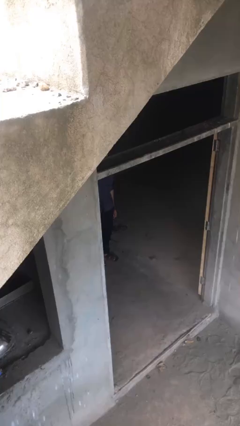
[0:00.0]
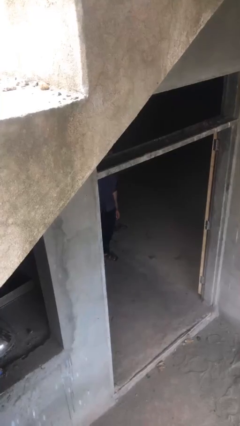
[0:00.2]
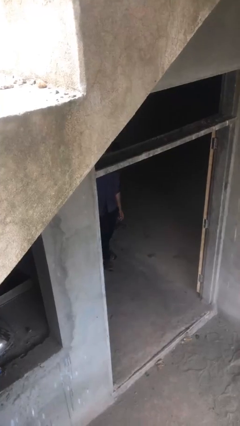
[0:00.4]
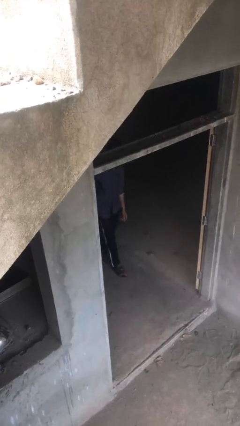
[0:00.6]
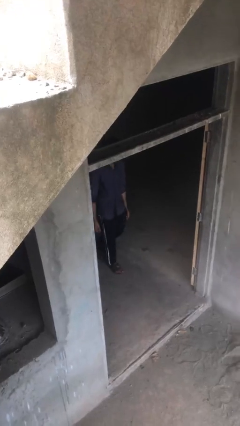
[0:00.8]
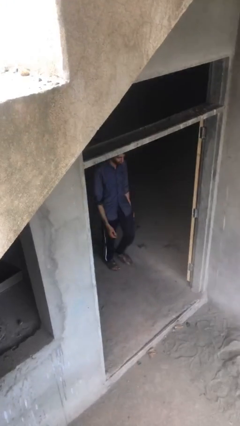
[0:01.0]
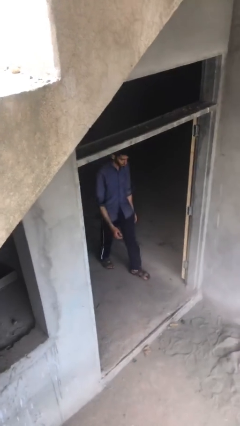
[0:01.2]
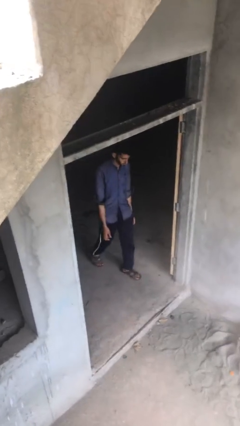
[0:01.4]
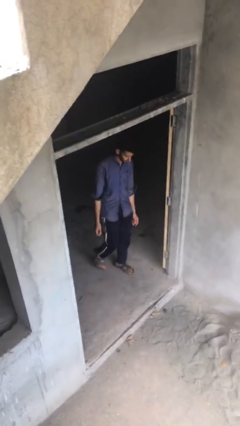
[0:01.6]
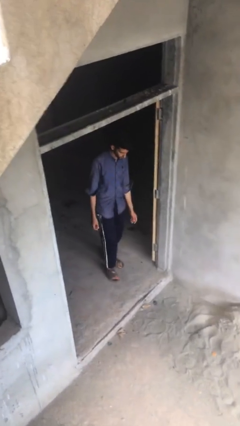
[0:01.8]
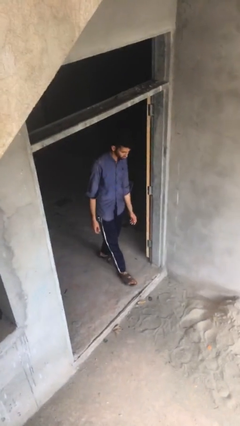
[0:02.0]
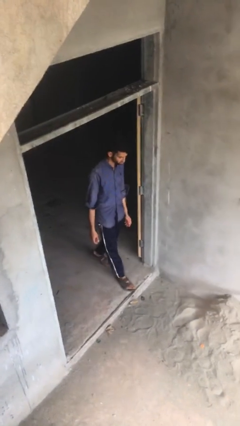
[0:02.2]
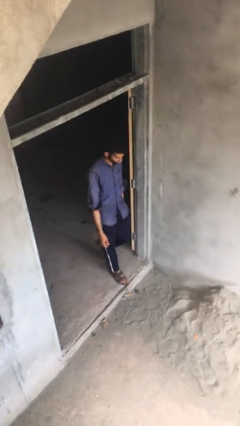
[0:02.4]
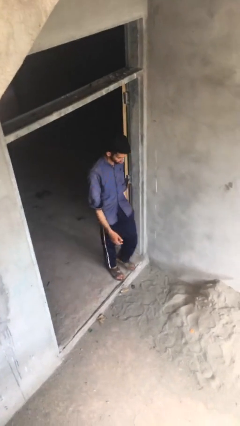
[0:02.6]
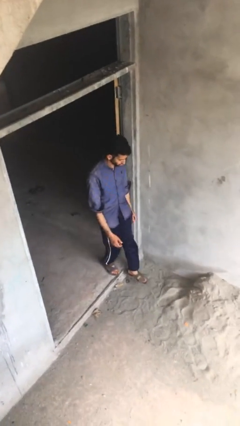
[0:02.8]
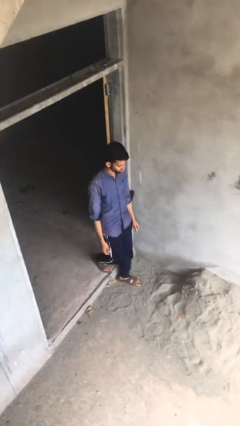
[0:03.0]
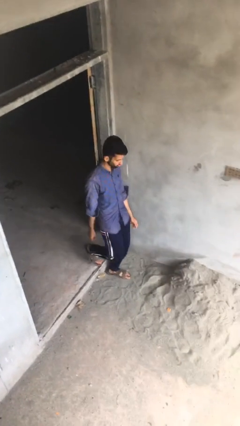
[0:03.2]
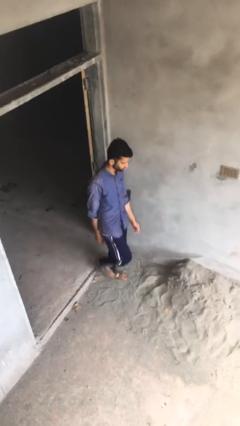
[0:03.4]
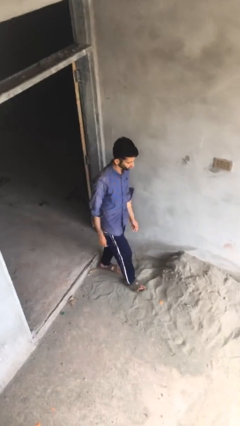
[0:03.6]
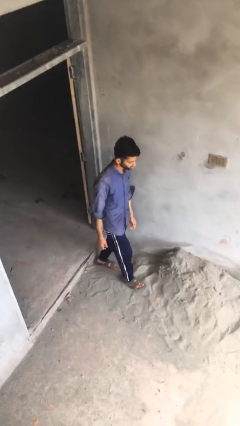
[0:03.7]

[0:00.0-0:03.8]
person enters scene through structure

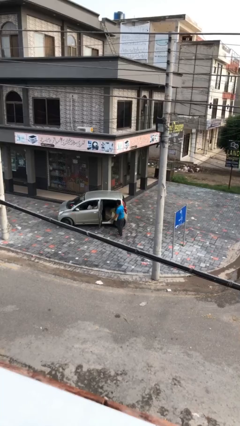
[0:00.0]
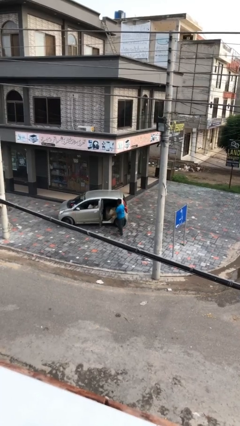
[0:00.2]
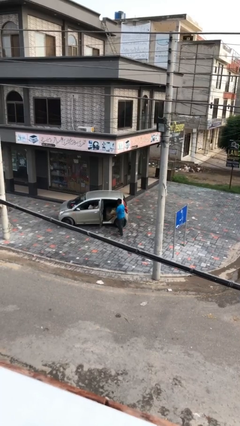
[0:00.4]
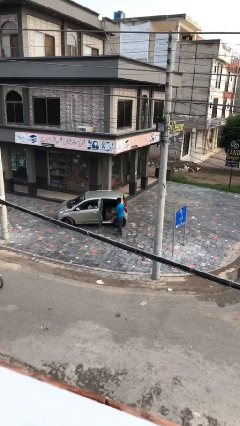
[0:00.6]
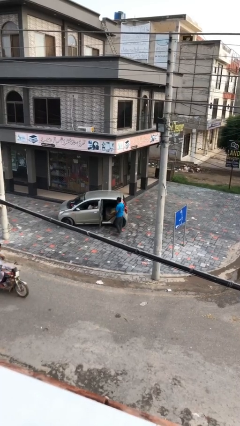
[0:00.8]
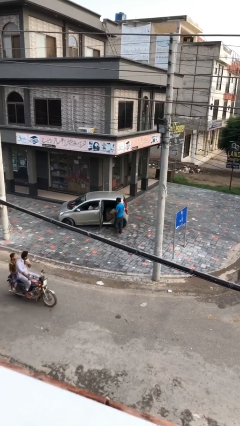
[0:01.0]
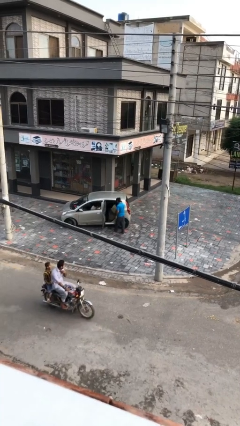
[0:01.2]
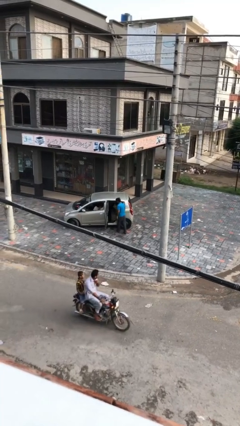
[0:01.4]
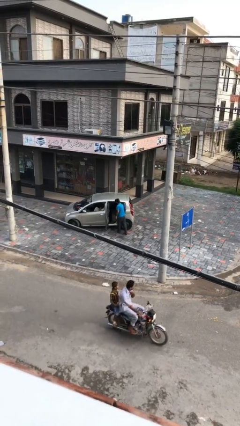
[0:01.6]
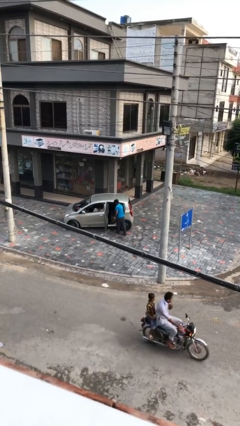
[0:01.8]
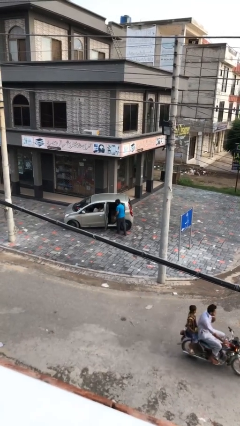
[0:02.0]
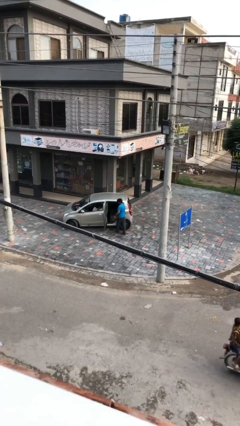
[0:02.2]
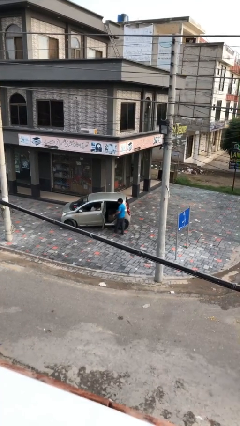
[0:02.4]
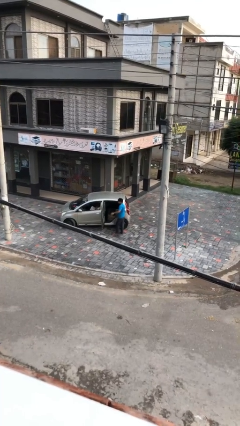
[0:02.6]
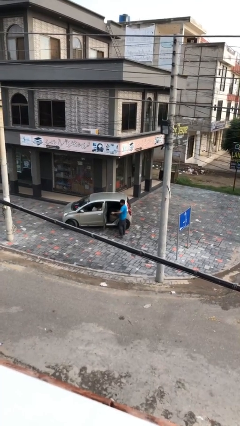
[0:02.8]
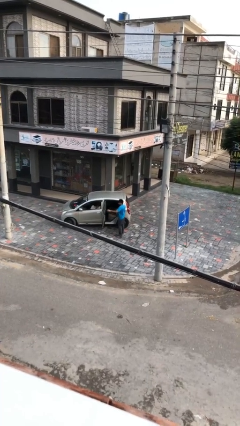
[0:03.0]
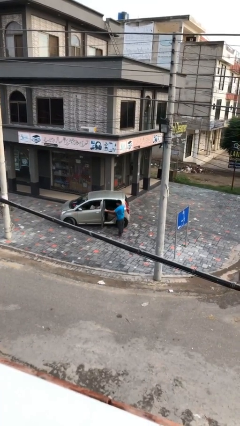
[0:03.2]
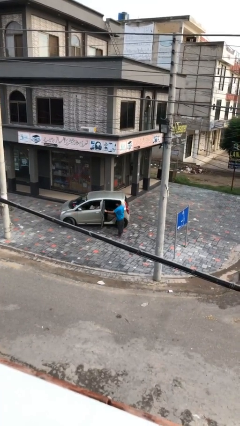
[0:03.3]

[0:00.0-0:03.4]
person loads car

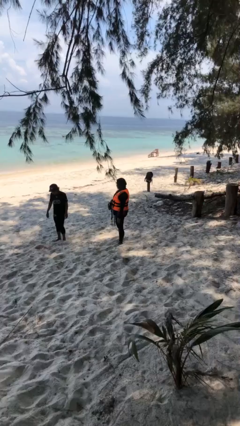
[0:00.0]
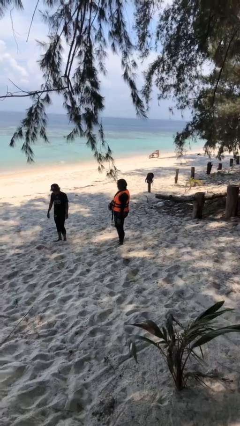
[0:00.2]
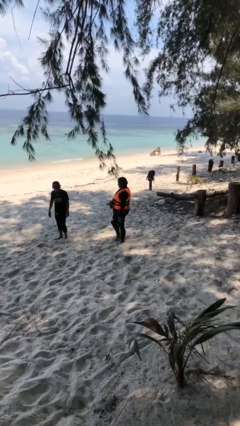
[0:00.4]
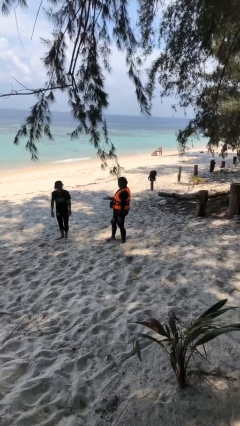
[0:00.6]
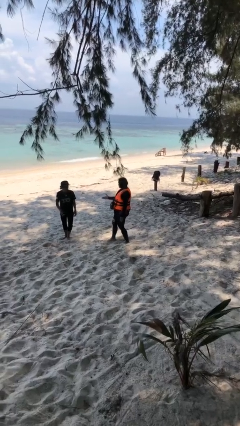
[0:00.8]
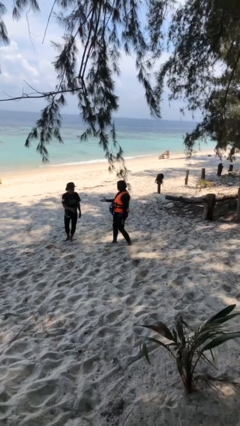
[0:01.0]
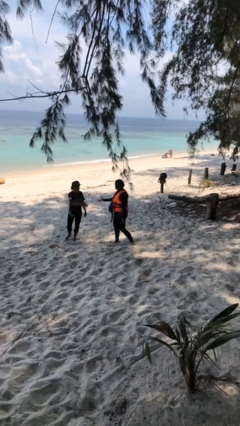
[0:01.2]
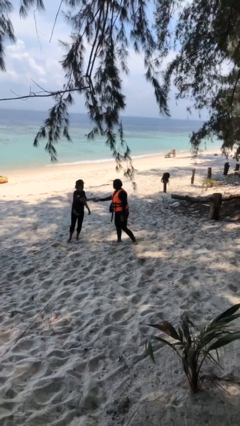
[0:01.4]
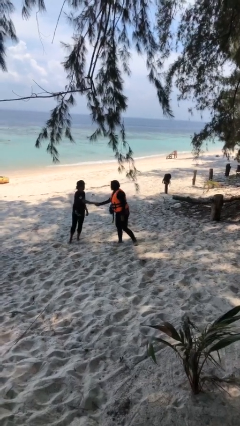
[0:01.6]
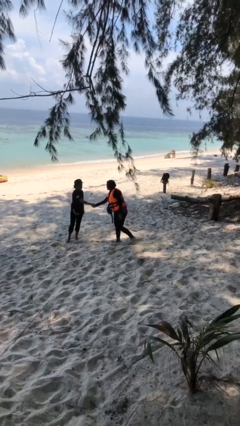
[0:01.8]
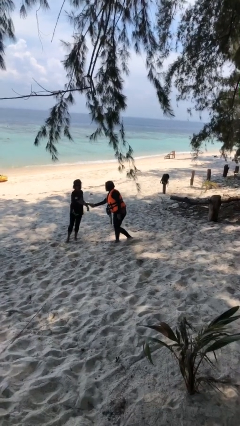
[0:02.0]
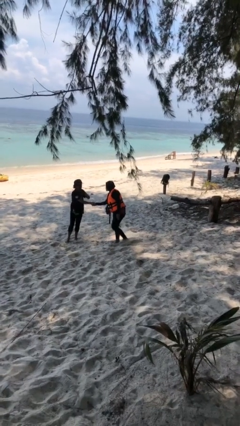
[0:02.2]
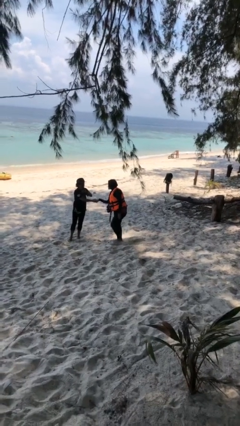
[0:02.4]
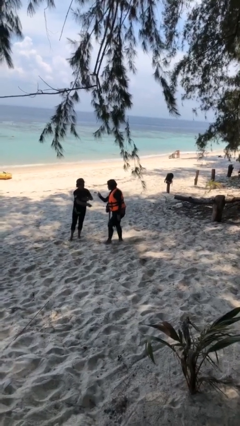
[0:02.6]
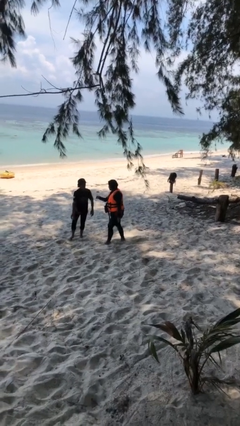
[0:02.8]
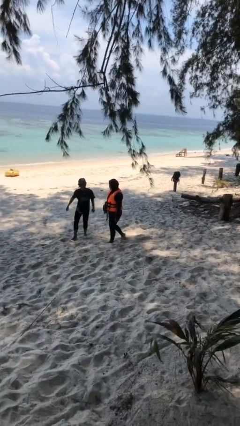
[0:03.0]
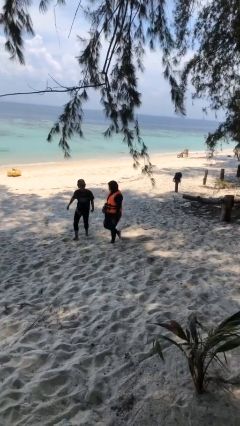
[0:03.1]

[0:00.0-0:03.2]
person shakes hand

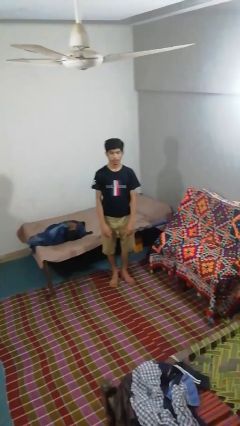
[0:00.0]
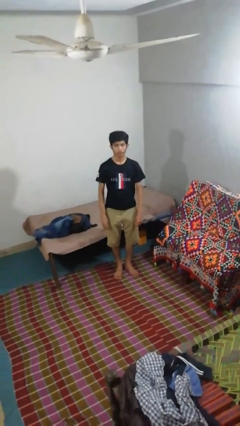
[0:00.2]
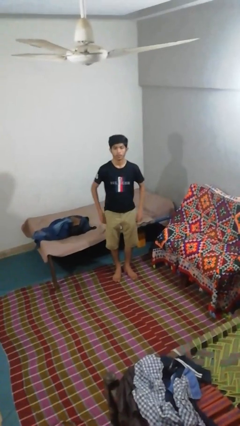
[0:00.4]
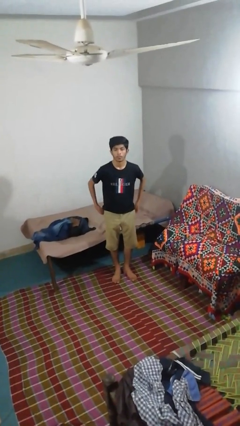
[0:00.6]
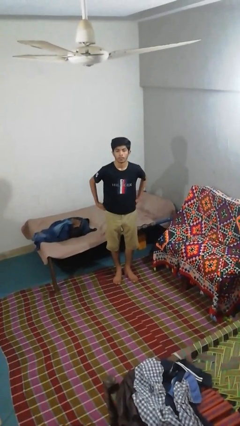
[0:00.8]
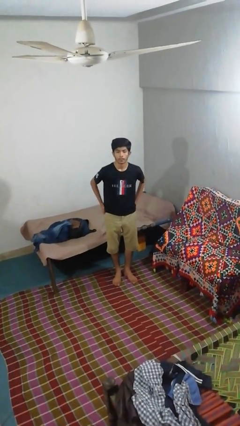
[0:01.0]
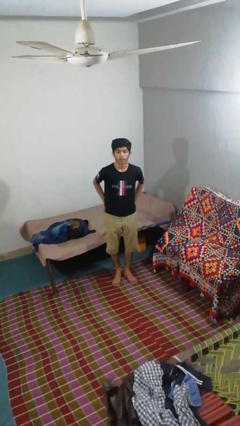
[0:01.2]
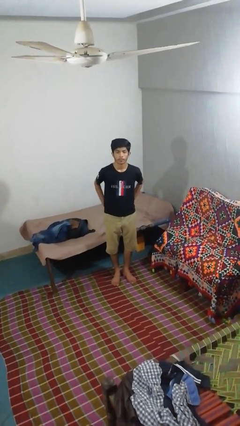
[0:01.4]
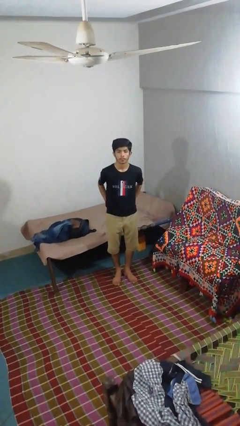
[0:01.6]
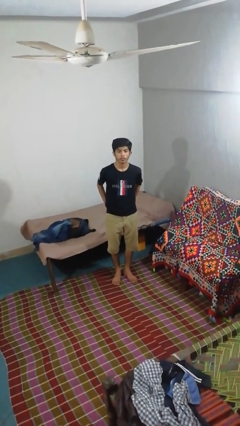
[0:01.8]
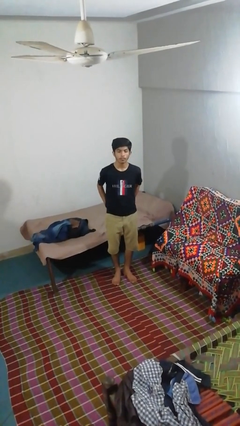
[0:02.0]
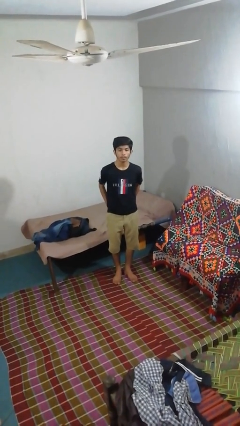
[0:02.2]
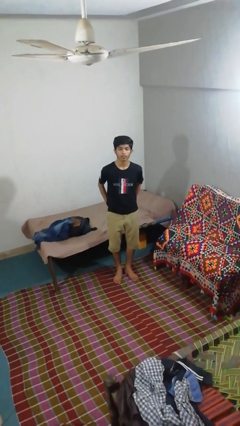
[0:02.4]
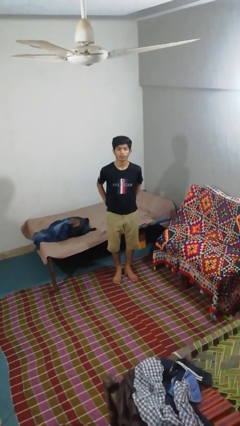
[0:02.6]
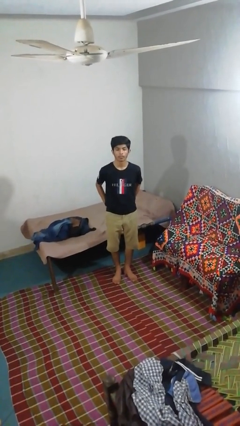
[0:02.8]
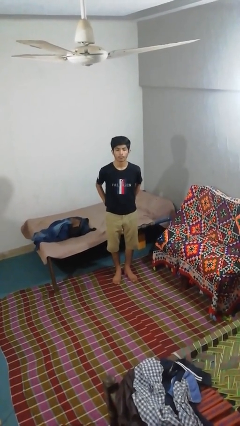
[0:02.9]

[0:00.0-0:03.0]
person puts hands in back pockets

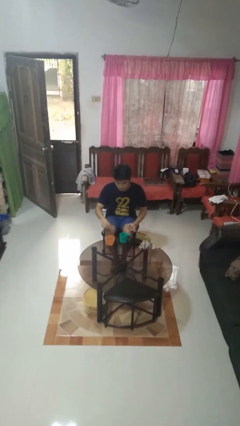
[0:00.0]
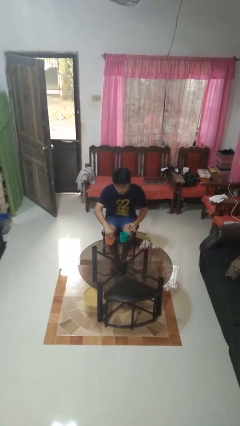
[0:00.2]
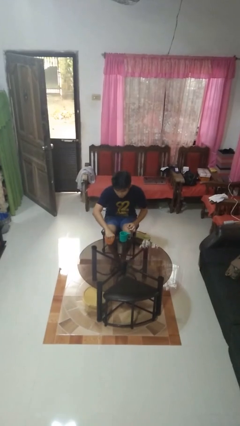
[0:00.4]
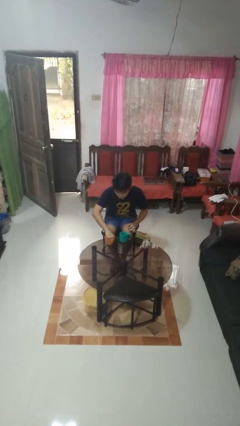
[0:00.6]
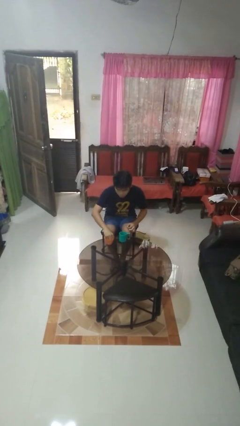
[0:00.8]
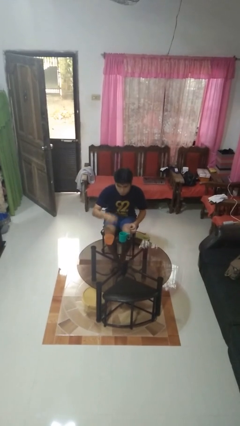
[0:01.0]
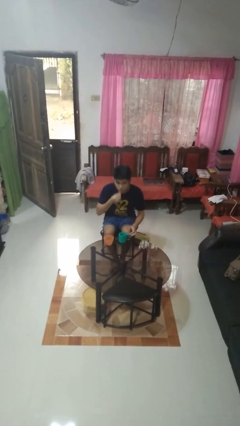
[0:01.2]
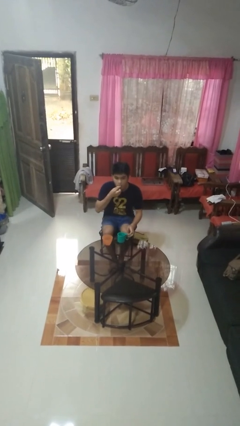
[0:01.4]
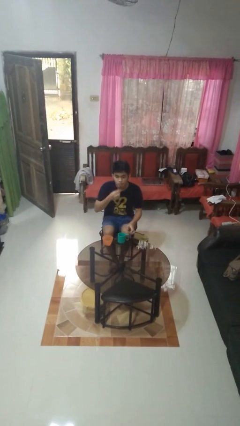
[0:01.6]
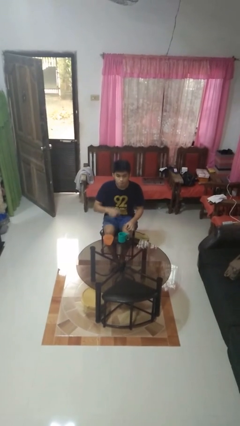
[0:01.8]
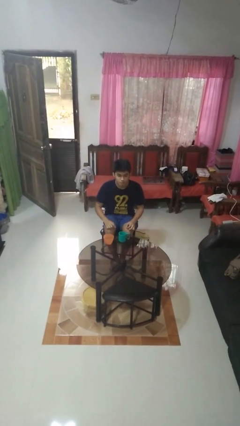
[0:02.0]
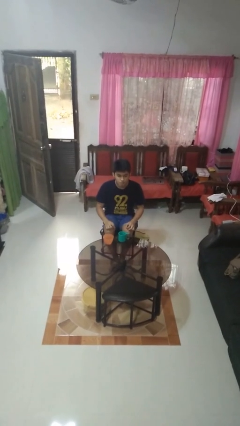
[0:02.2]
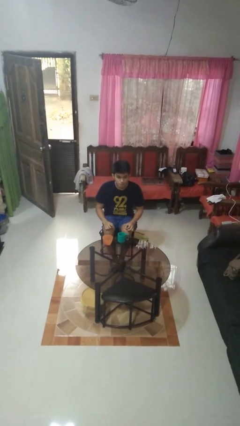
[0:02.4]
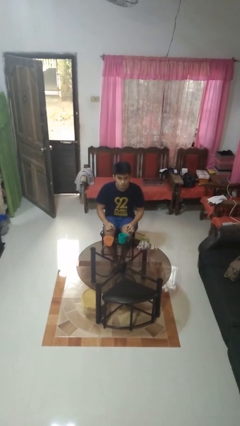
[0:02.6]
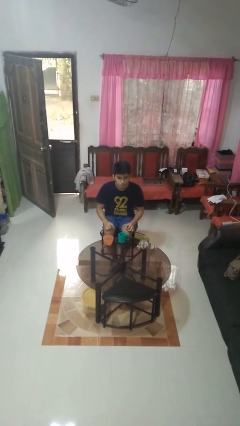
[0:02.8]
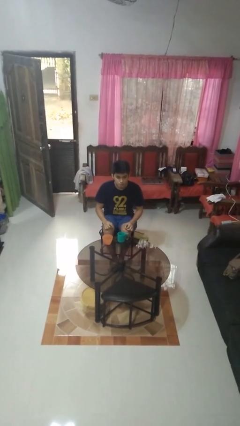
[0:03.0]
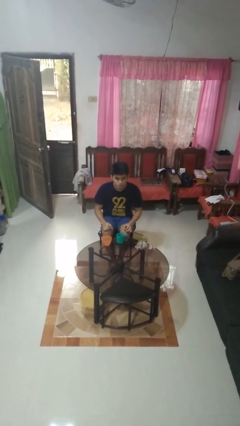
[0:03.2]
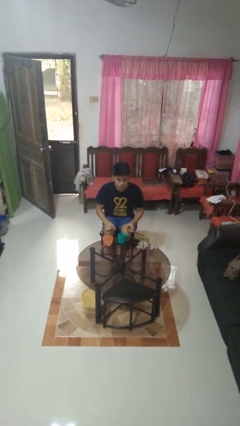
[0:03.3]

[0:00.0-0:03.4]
person takes medicine pills

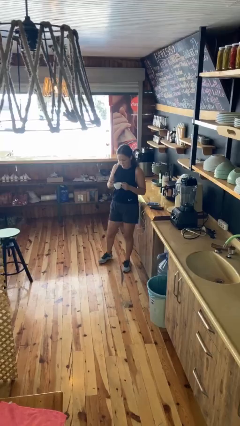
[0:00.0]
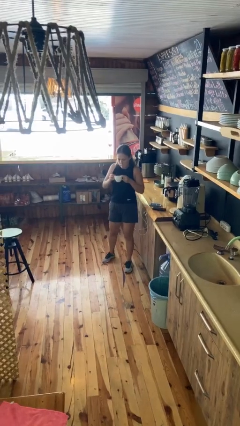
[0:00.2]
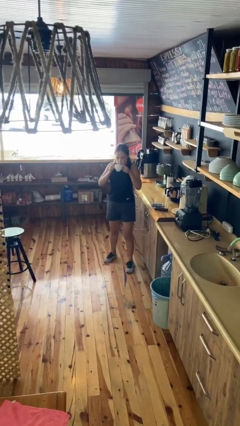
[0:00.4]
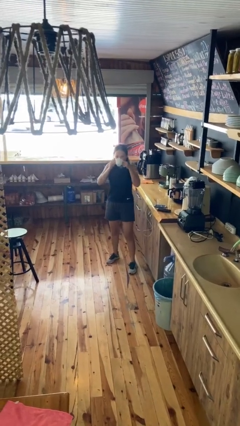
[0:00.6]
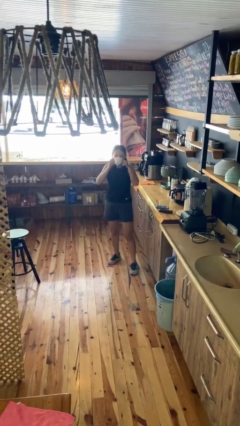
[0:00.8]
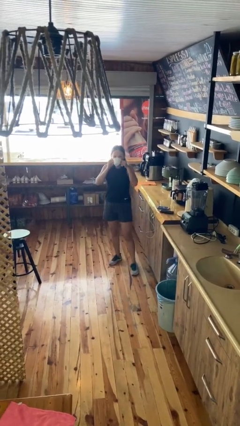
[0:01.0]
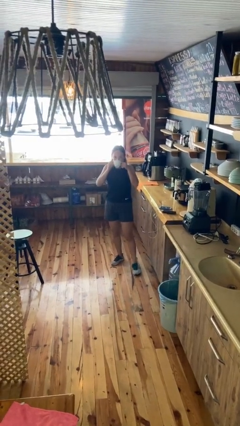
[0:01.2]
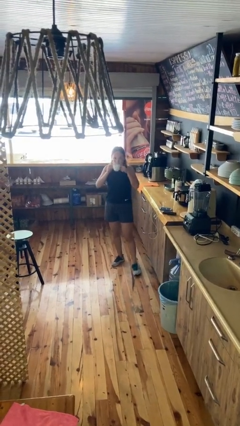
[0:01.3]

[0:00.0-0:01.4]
person drinks from mug
